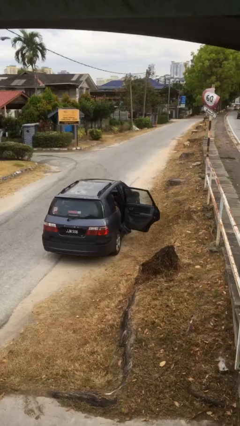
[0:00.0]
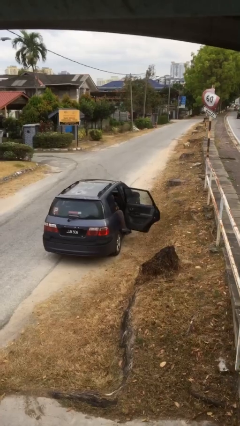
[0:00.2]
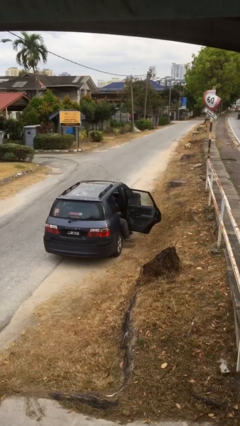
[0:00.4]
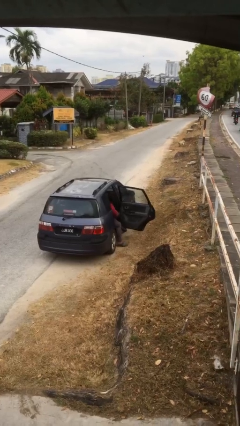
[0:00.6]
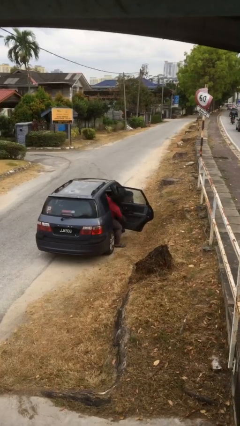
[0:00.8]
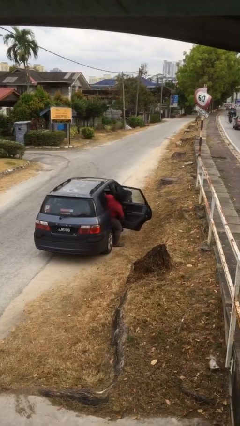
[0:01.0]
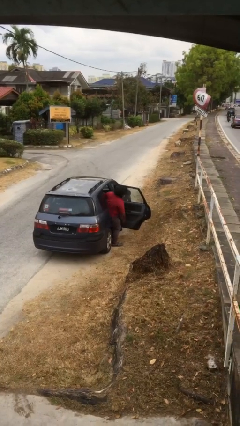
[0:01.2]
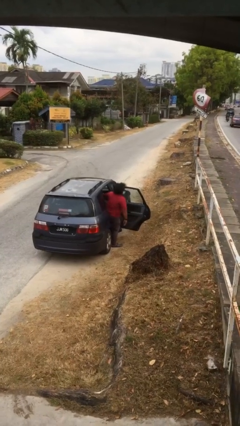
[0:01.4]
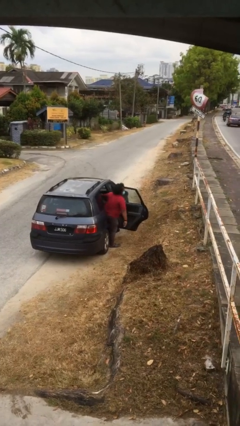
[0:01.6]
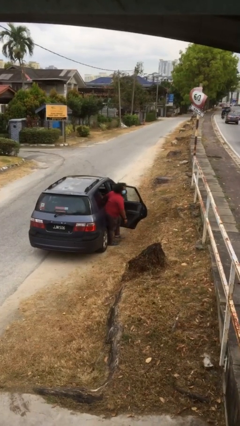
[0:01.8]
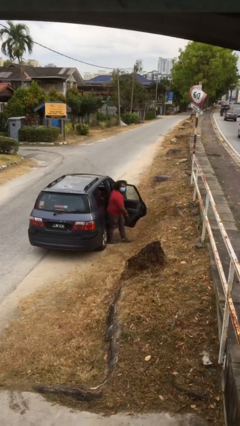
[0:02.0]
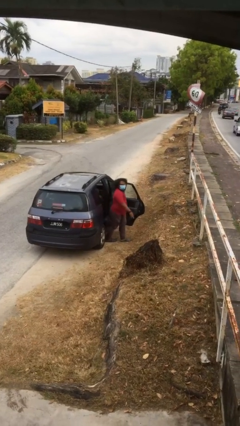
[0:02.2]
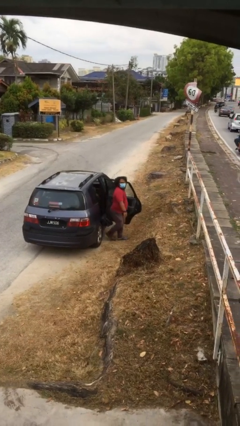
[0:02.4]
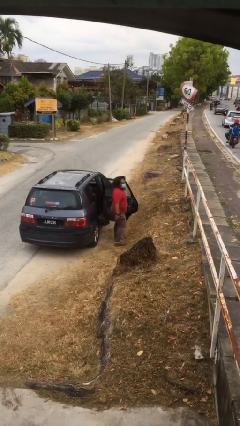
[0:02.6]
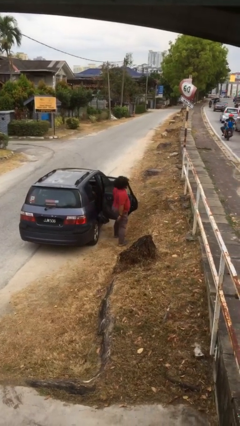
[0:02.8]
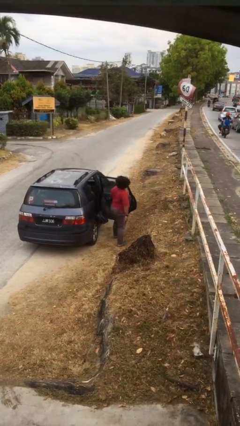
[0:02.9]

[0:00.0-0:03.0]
person exits car

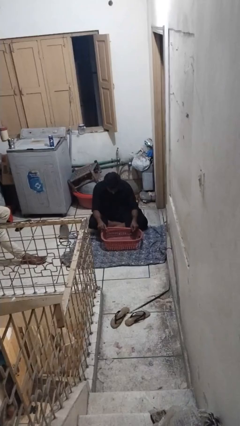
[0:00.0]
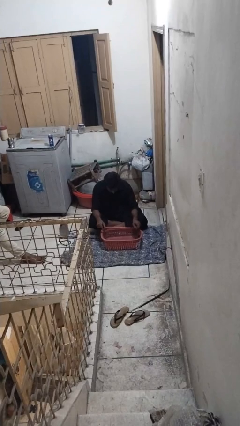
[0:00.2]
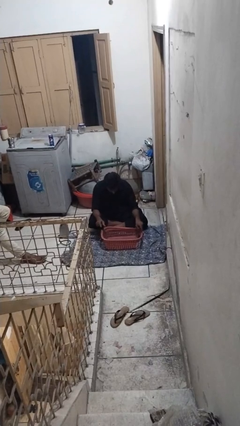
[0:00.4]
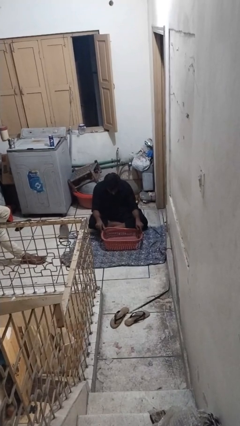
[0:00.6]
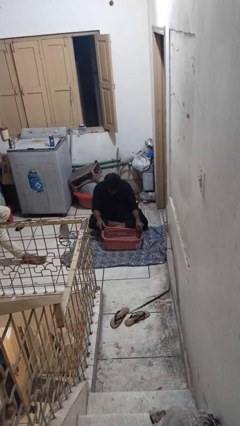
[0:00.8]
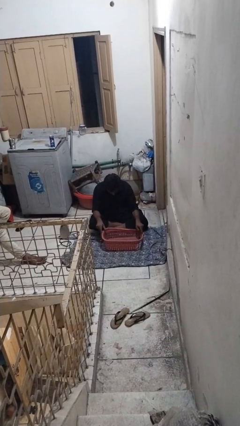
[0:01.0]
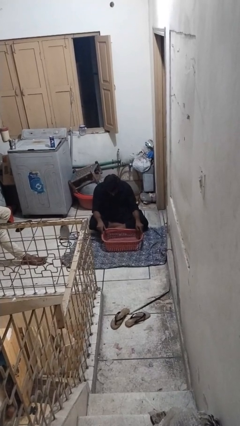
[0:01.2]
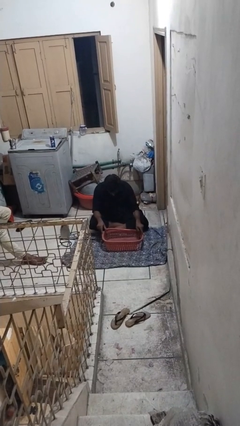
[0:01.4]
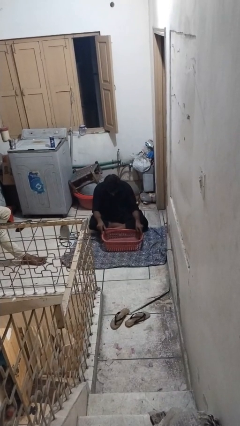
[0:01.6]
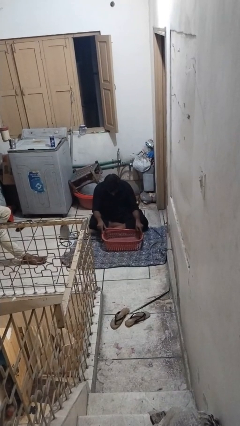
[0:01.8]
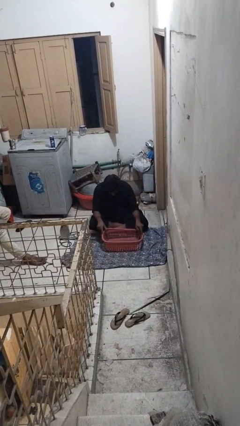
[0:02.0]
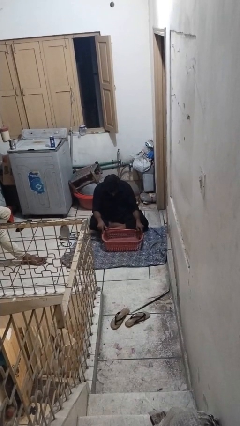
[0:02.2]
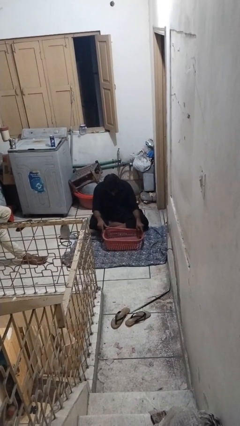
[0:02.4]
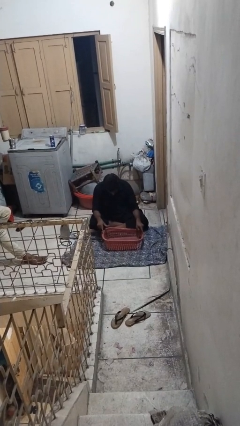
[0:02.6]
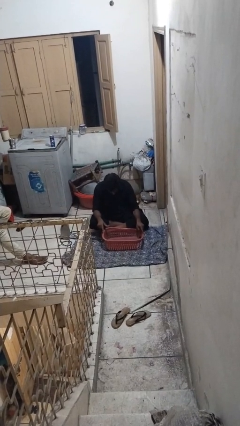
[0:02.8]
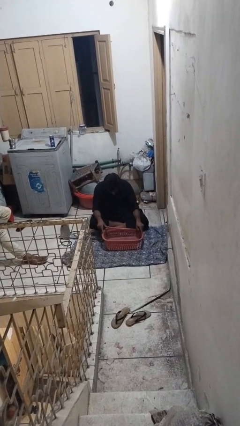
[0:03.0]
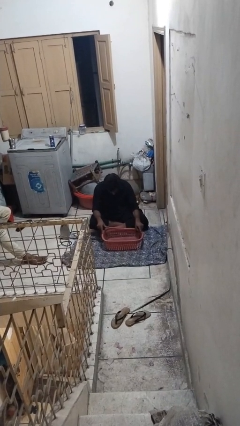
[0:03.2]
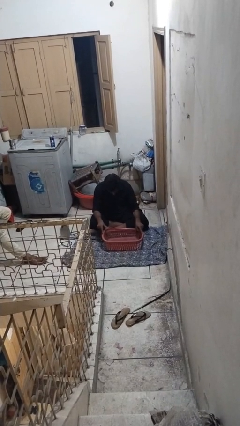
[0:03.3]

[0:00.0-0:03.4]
person taps object with finger

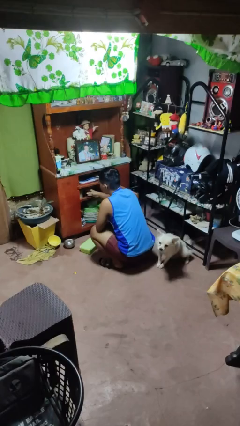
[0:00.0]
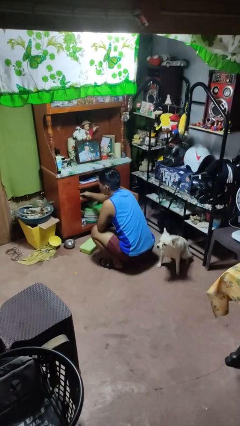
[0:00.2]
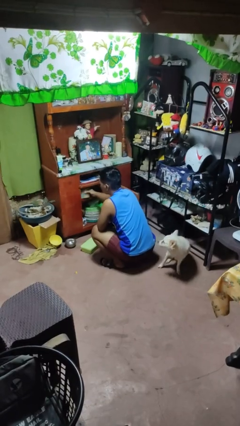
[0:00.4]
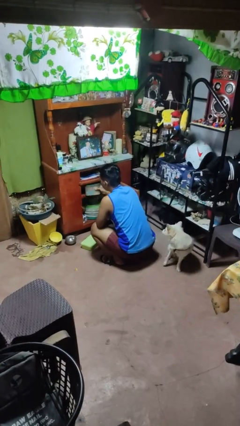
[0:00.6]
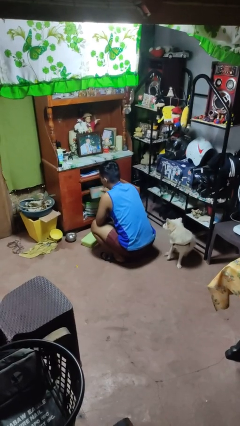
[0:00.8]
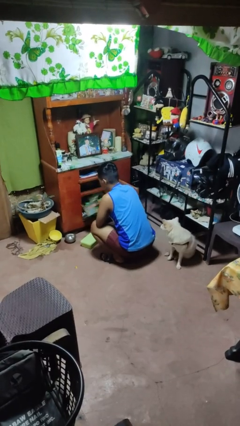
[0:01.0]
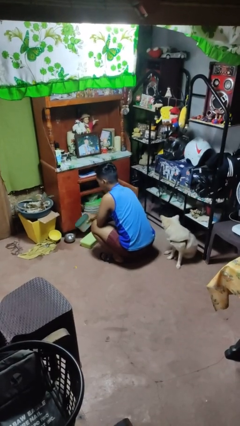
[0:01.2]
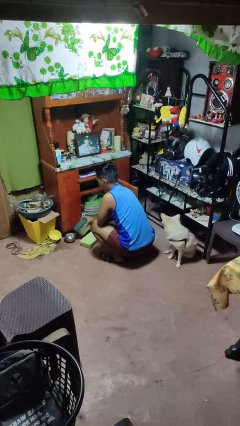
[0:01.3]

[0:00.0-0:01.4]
person takes object from cabinet

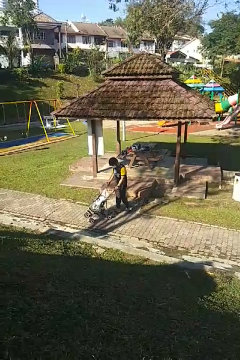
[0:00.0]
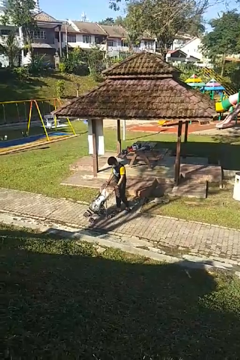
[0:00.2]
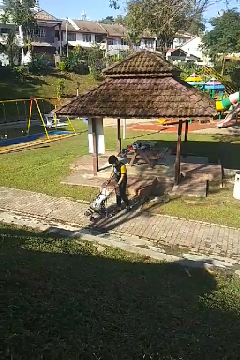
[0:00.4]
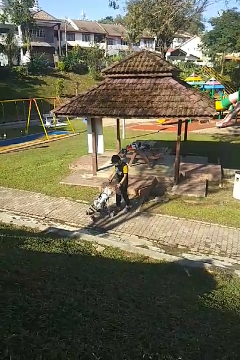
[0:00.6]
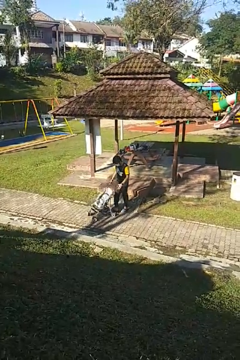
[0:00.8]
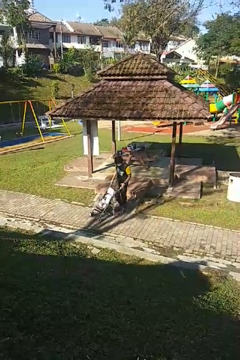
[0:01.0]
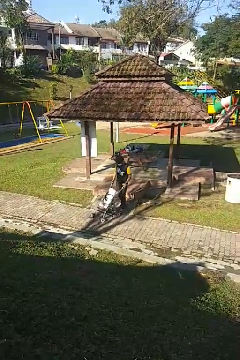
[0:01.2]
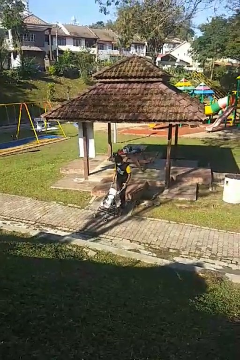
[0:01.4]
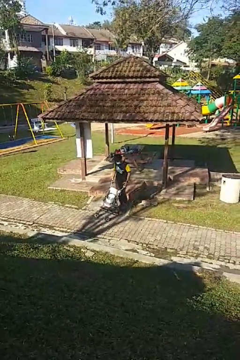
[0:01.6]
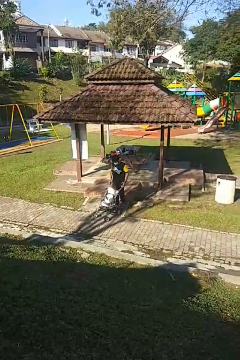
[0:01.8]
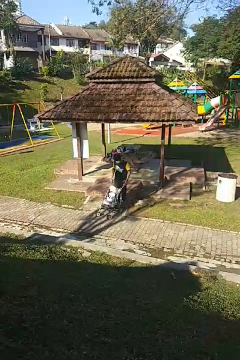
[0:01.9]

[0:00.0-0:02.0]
person pulls wheeled cart

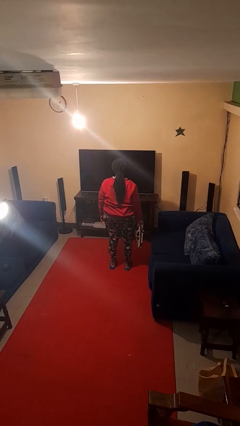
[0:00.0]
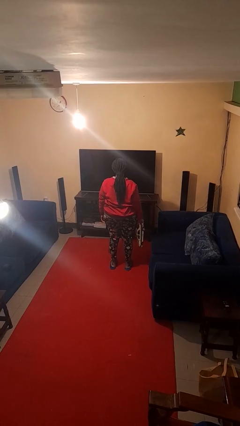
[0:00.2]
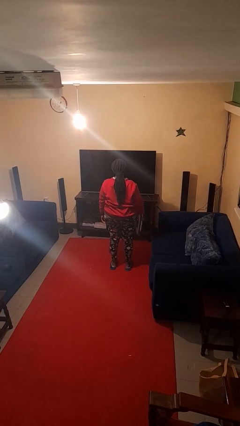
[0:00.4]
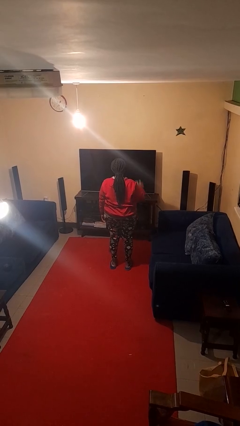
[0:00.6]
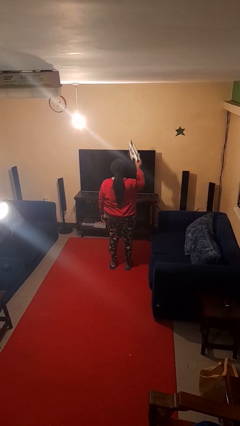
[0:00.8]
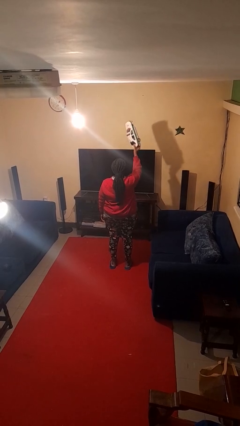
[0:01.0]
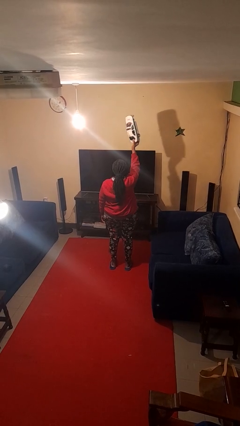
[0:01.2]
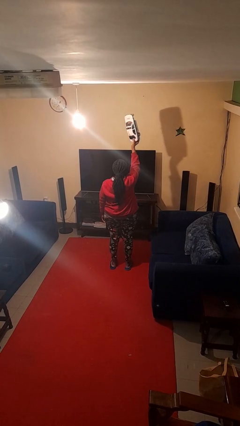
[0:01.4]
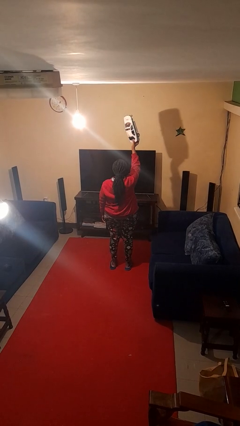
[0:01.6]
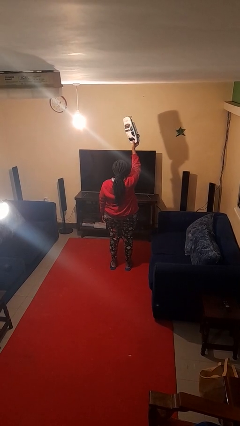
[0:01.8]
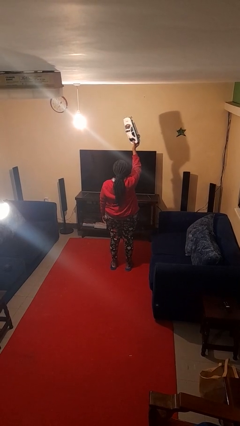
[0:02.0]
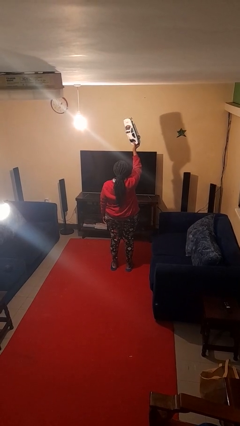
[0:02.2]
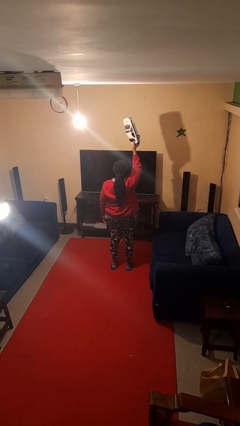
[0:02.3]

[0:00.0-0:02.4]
person holds object above head

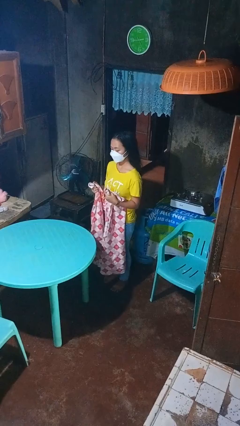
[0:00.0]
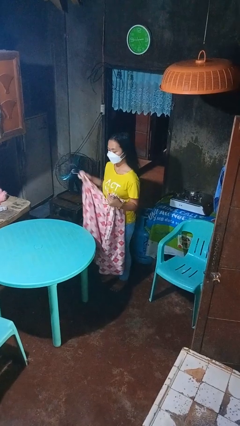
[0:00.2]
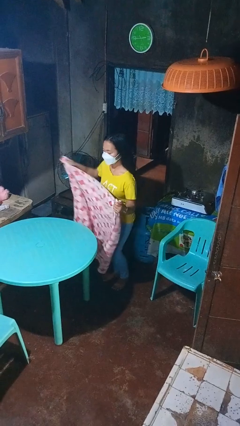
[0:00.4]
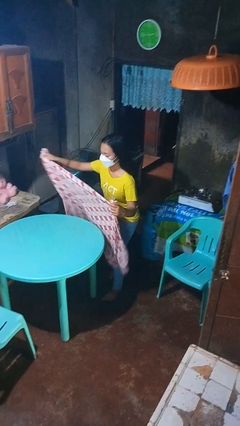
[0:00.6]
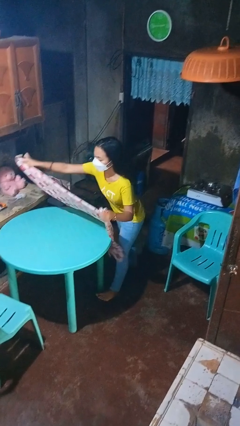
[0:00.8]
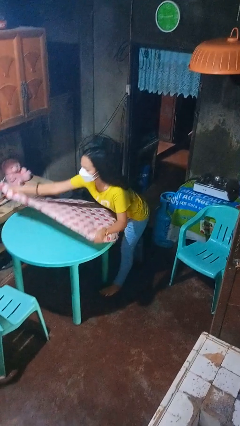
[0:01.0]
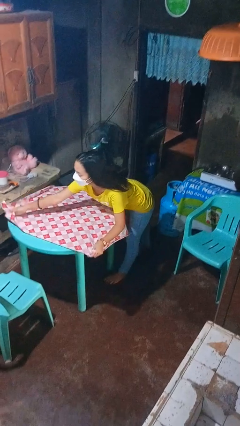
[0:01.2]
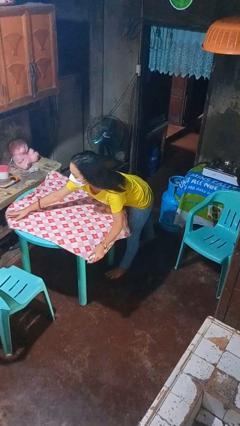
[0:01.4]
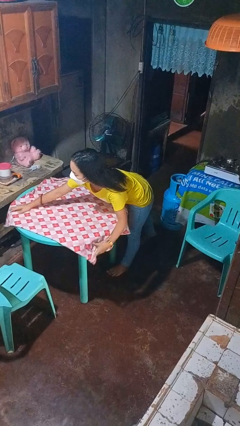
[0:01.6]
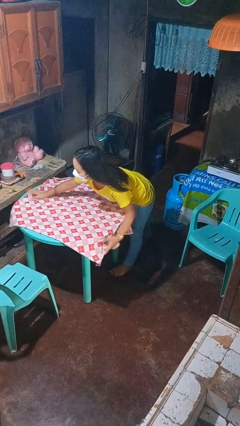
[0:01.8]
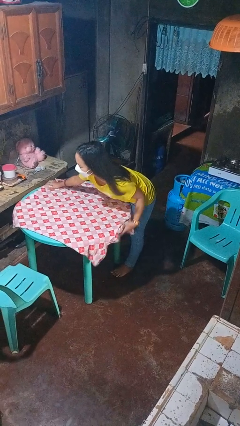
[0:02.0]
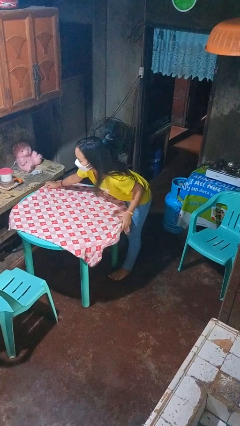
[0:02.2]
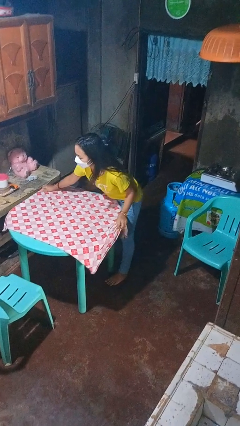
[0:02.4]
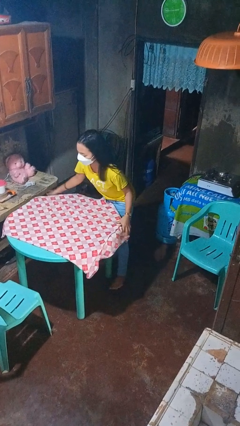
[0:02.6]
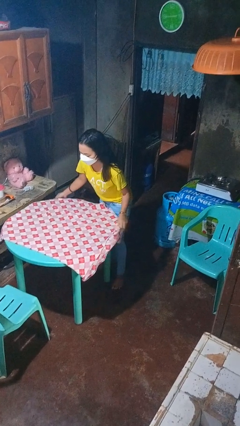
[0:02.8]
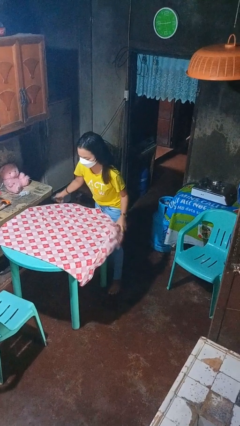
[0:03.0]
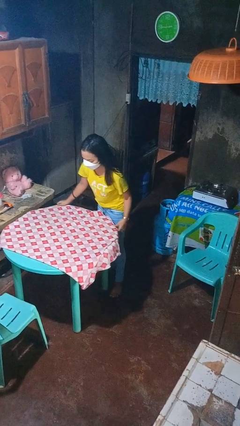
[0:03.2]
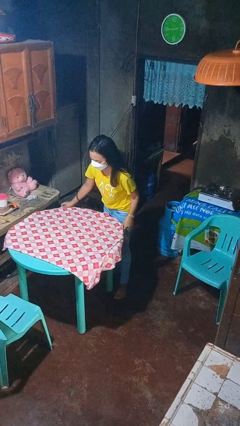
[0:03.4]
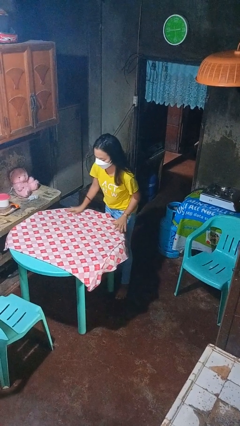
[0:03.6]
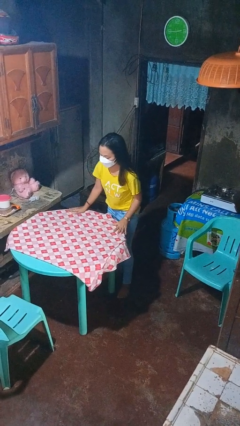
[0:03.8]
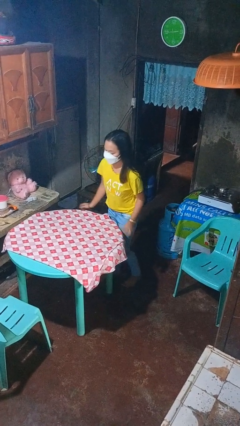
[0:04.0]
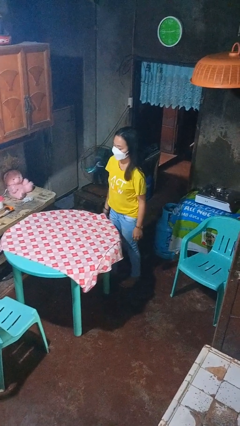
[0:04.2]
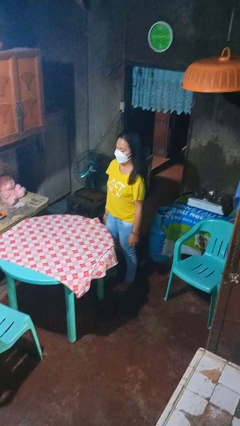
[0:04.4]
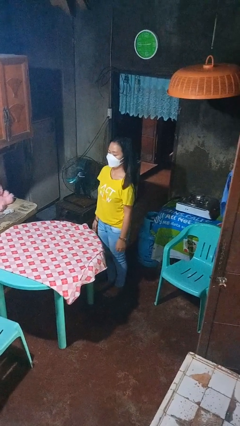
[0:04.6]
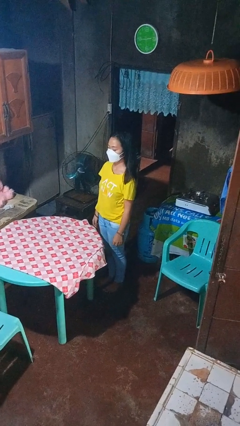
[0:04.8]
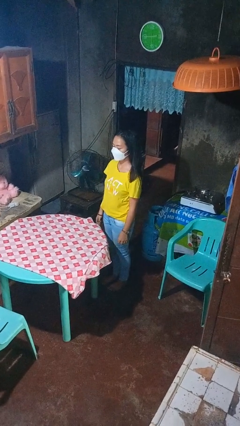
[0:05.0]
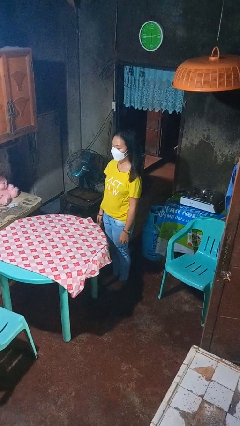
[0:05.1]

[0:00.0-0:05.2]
person spreads tablecloth

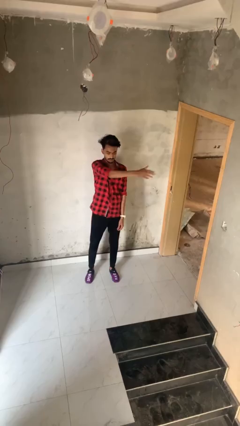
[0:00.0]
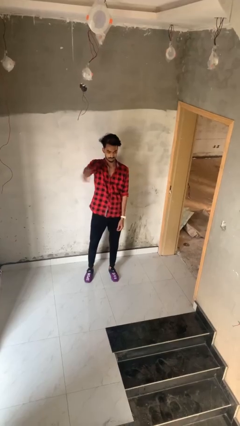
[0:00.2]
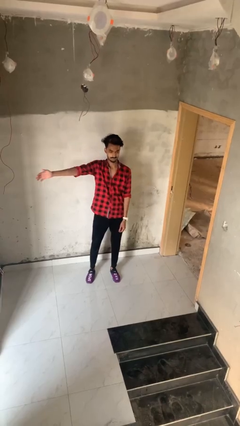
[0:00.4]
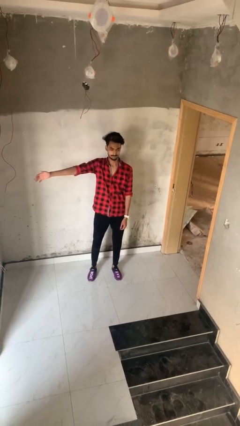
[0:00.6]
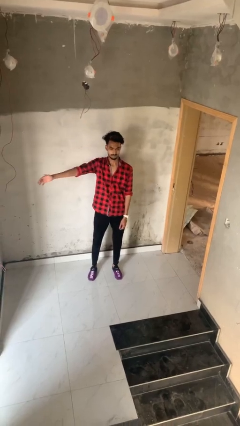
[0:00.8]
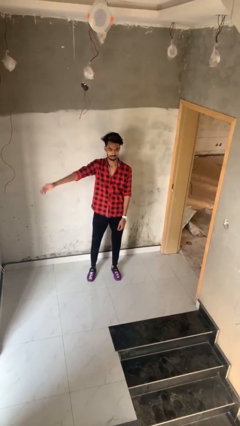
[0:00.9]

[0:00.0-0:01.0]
person gestures swipe right
